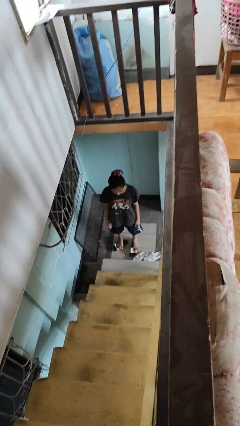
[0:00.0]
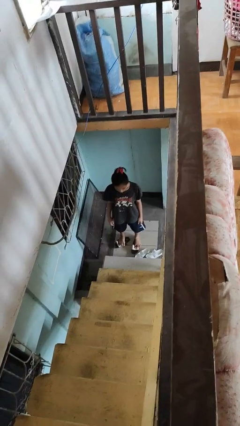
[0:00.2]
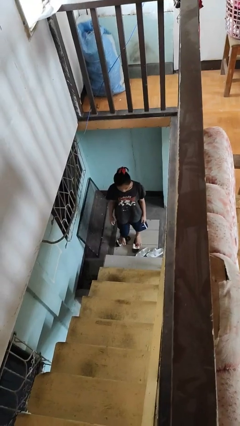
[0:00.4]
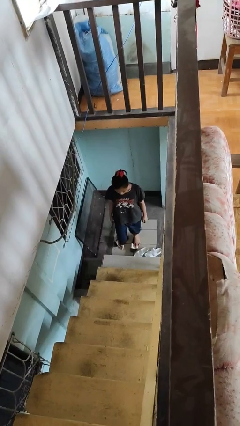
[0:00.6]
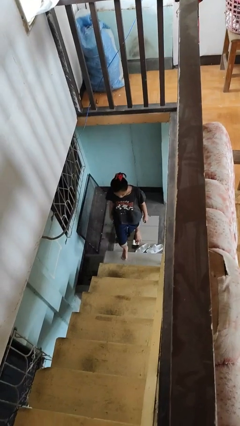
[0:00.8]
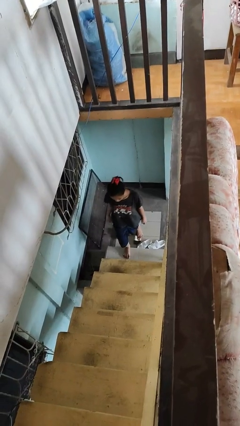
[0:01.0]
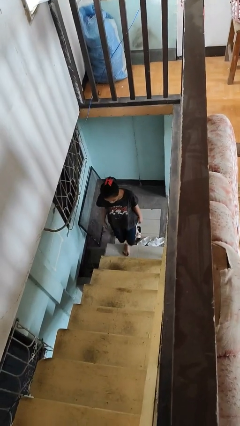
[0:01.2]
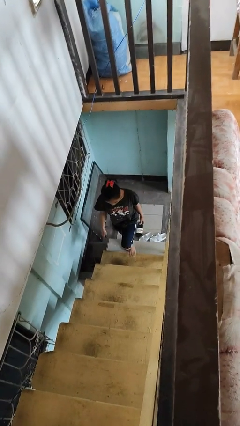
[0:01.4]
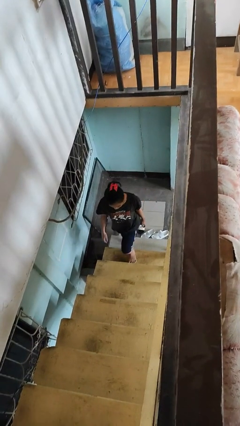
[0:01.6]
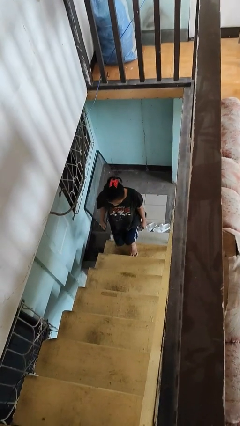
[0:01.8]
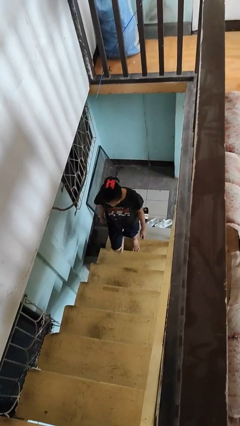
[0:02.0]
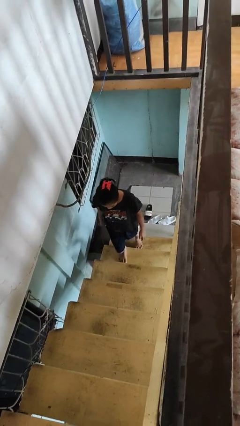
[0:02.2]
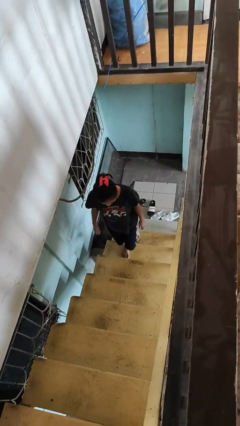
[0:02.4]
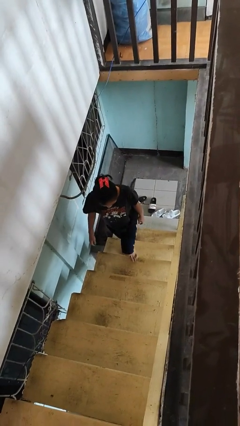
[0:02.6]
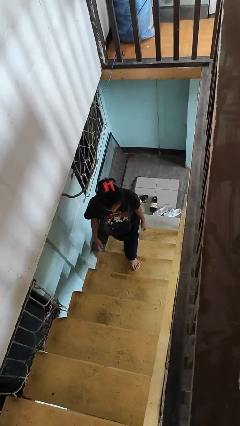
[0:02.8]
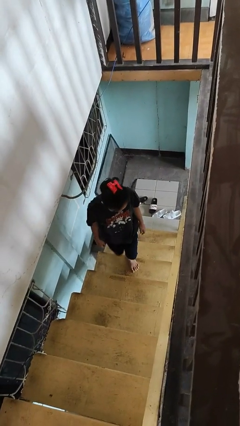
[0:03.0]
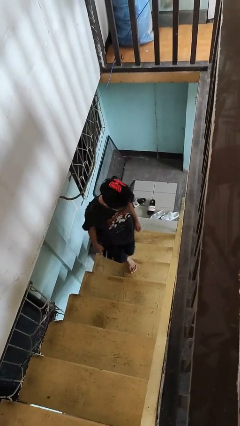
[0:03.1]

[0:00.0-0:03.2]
person climbs up stairs

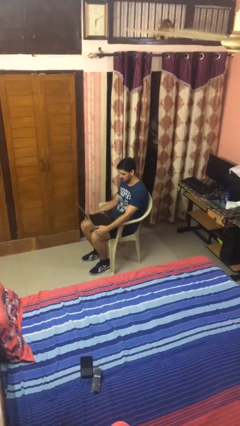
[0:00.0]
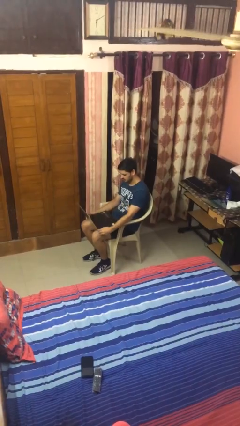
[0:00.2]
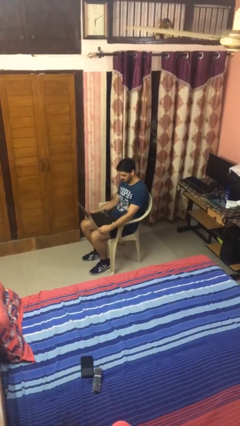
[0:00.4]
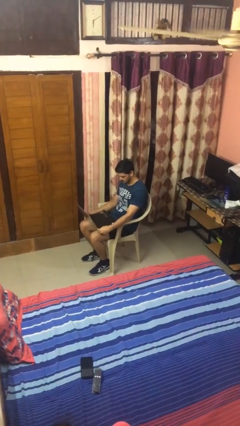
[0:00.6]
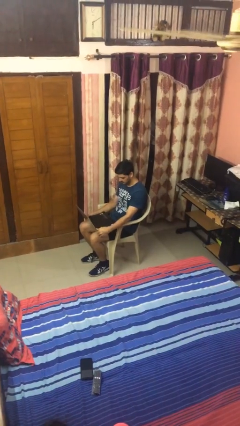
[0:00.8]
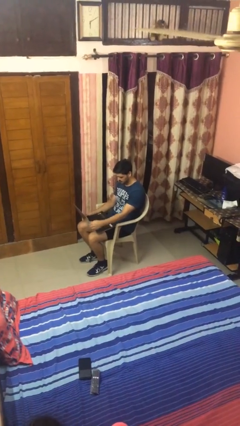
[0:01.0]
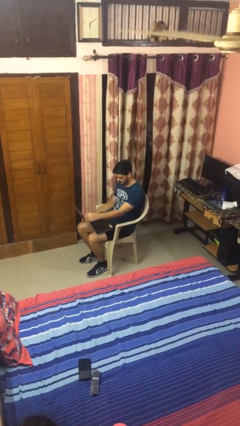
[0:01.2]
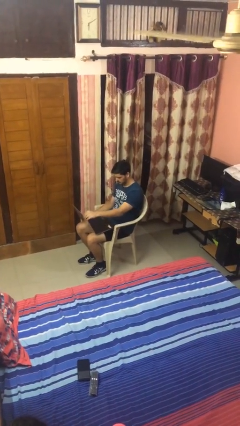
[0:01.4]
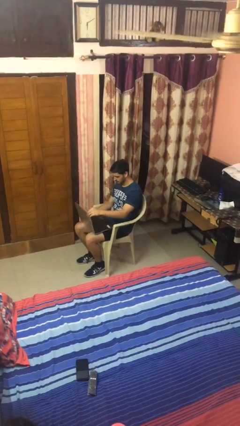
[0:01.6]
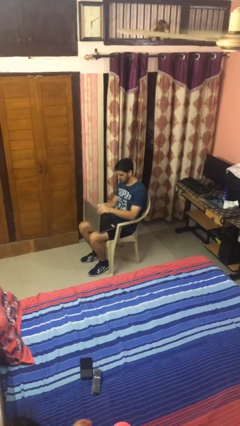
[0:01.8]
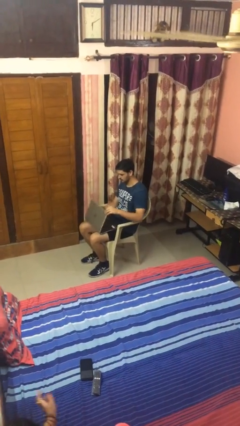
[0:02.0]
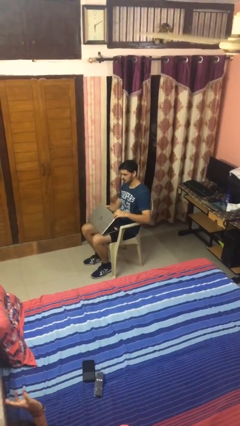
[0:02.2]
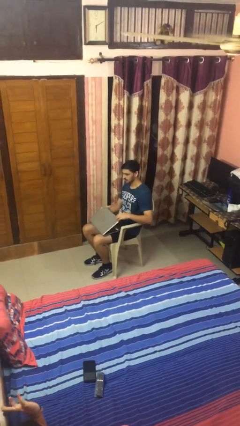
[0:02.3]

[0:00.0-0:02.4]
person closes laptop

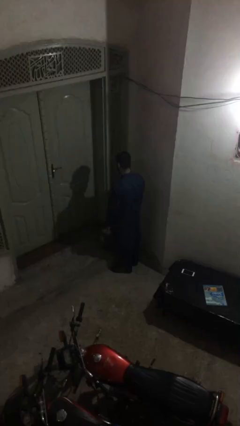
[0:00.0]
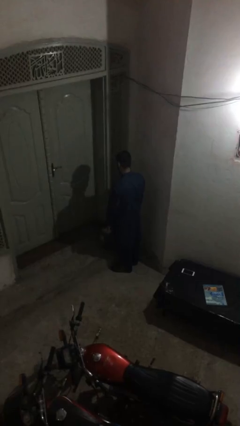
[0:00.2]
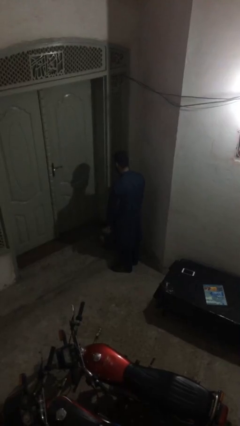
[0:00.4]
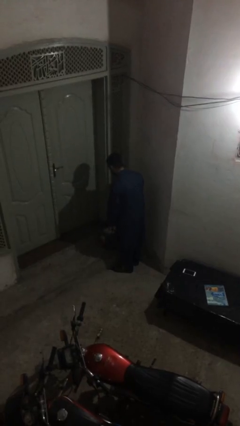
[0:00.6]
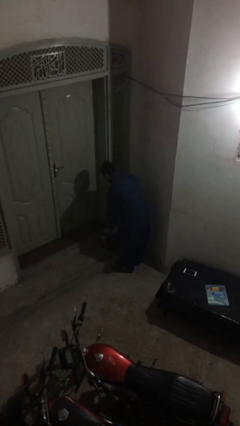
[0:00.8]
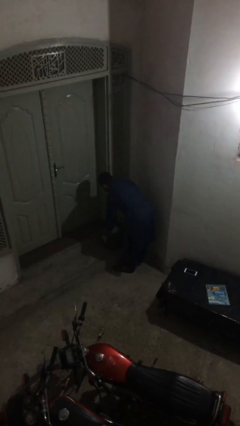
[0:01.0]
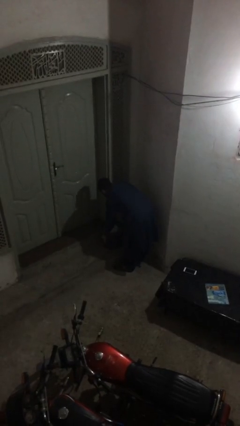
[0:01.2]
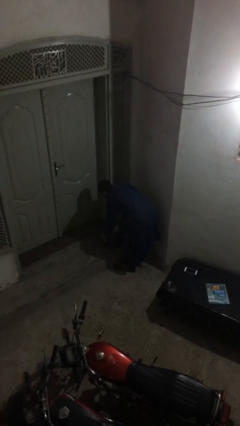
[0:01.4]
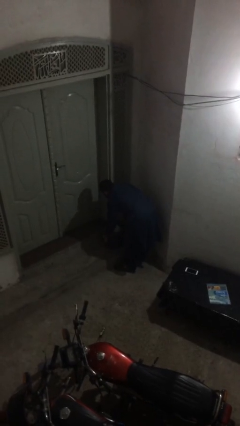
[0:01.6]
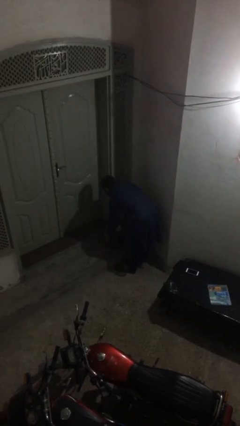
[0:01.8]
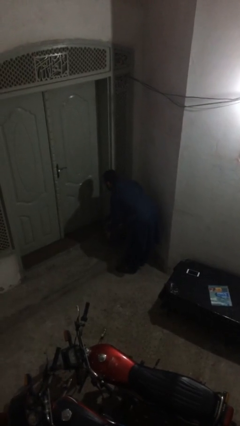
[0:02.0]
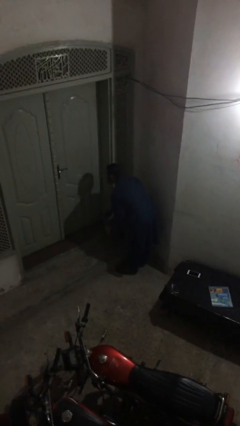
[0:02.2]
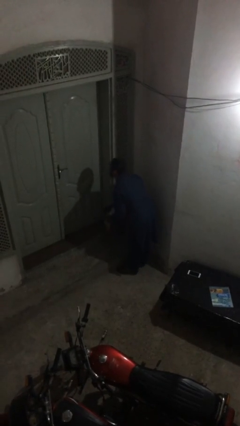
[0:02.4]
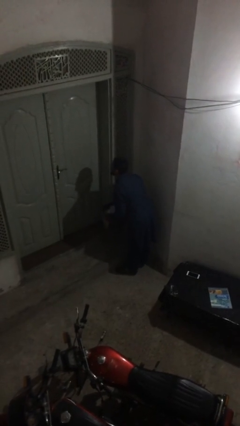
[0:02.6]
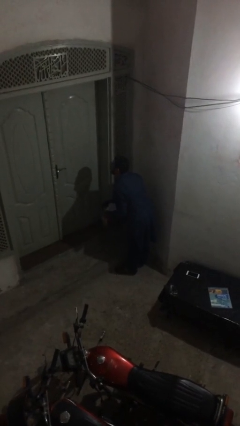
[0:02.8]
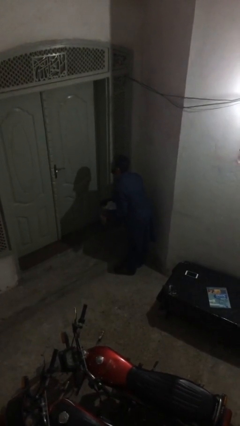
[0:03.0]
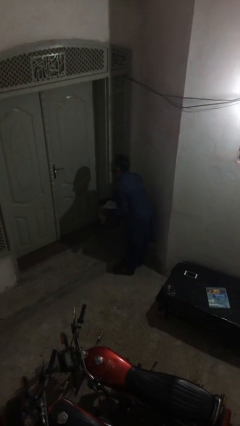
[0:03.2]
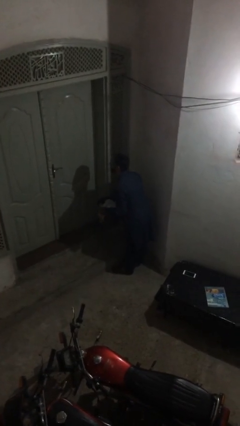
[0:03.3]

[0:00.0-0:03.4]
person picks up object from table

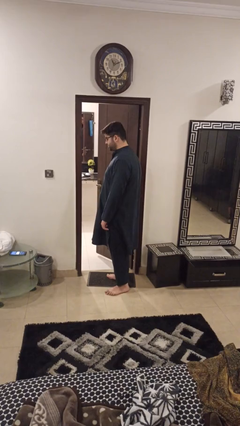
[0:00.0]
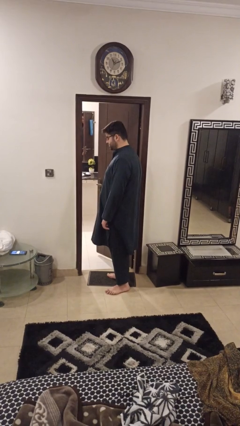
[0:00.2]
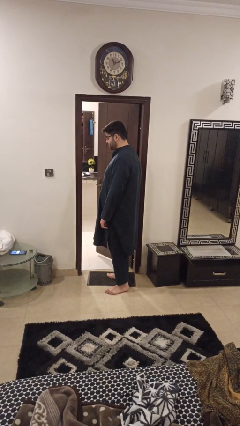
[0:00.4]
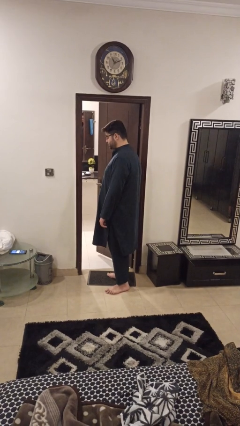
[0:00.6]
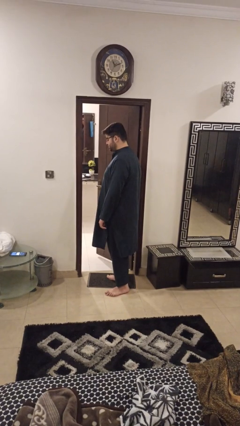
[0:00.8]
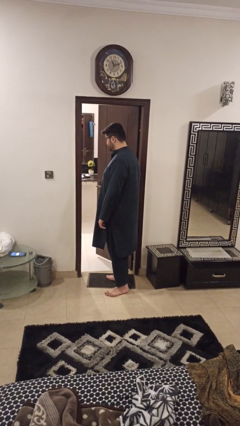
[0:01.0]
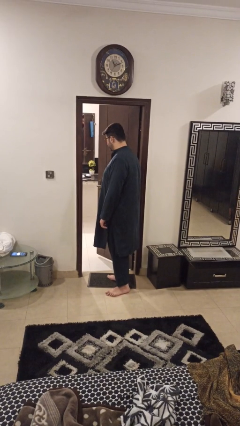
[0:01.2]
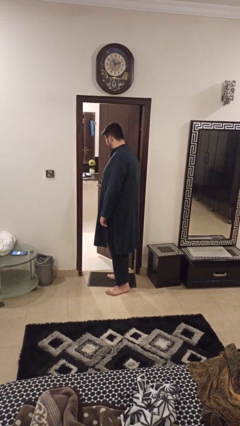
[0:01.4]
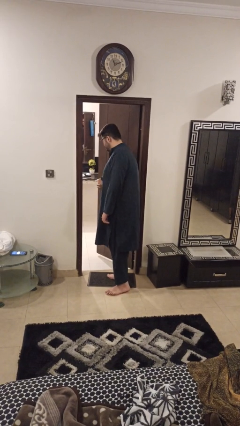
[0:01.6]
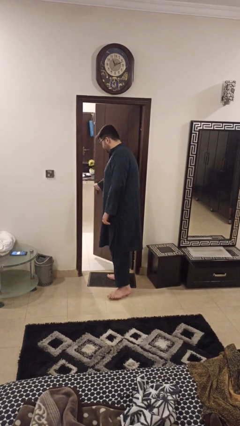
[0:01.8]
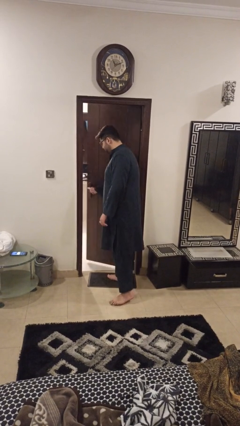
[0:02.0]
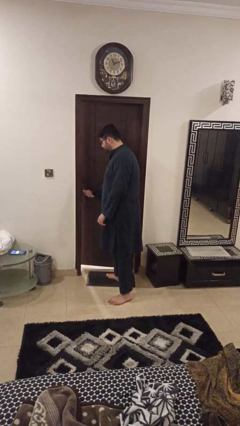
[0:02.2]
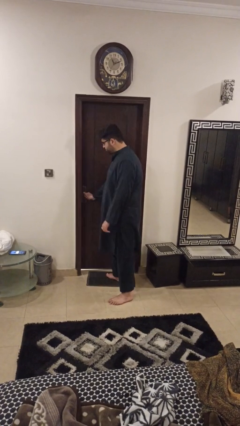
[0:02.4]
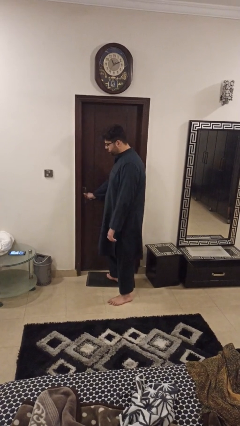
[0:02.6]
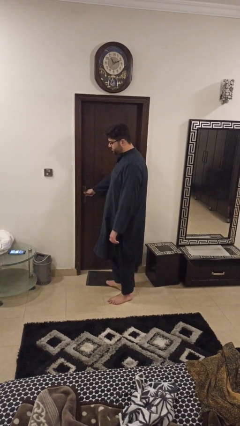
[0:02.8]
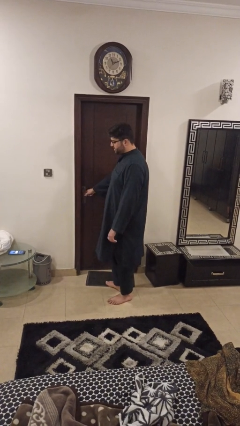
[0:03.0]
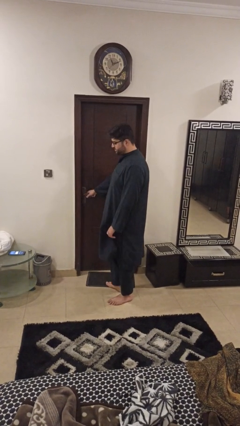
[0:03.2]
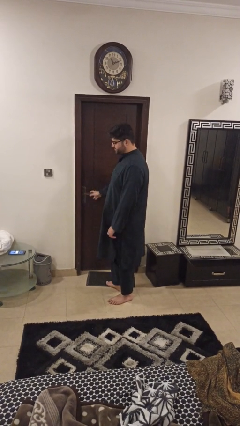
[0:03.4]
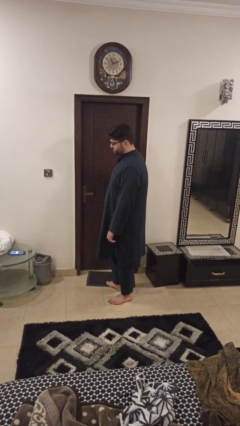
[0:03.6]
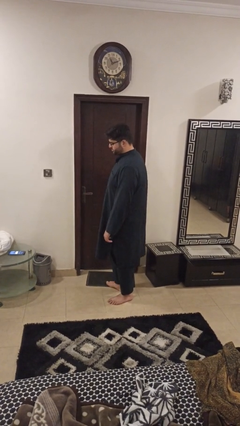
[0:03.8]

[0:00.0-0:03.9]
person closes facility door

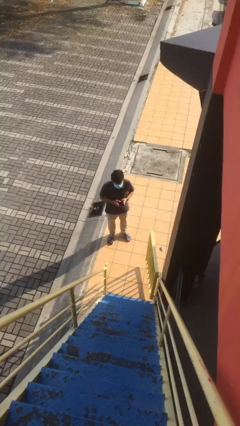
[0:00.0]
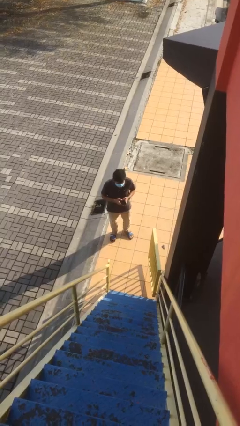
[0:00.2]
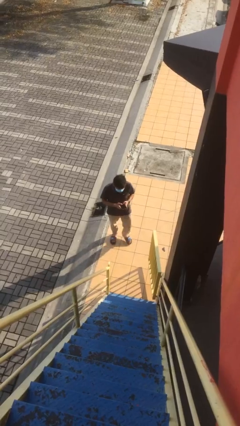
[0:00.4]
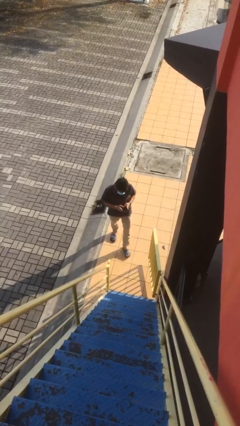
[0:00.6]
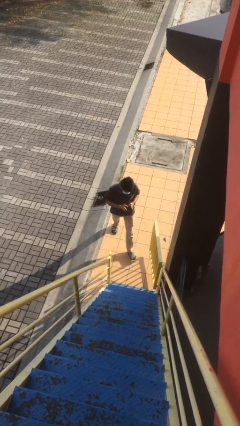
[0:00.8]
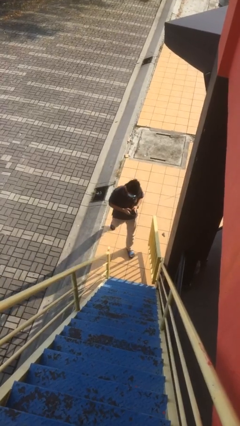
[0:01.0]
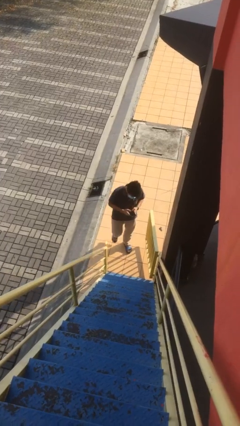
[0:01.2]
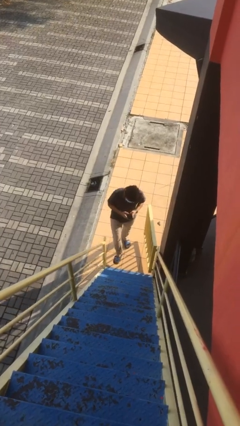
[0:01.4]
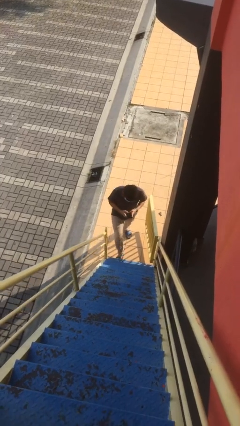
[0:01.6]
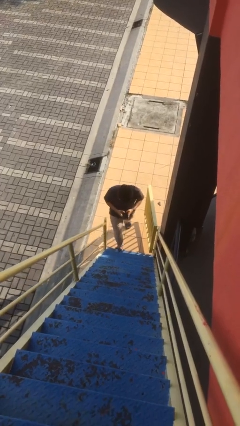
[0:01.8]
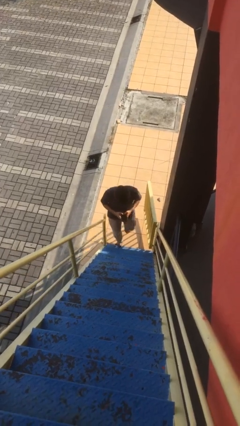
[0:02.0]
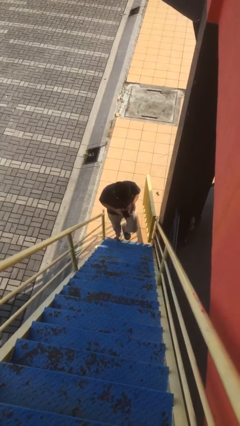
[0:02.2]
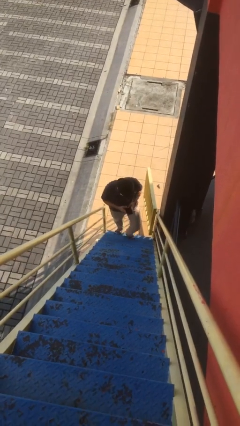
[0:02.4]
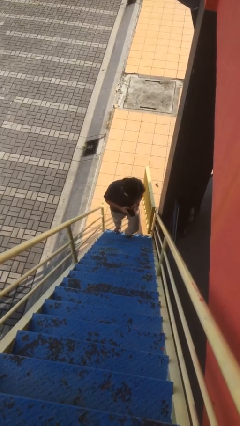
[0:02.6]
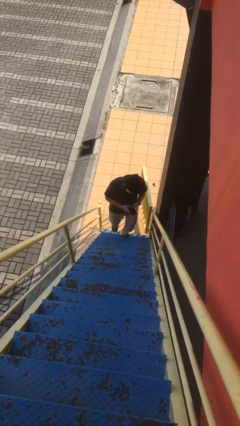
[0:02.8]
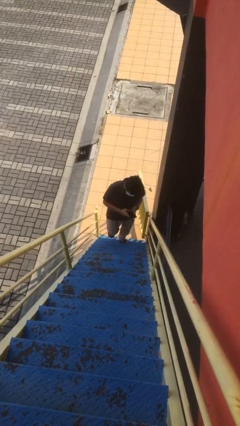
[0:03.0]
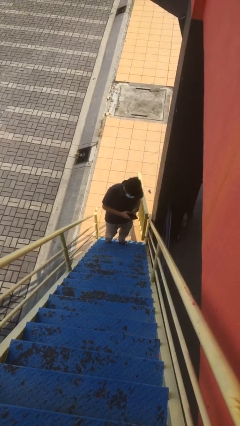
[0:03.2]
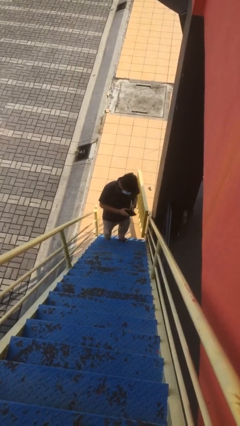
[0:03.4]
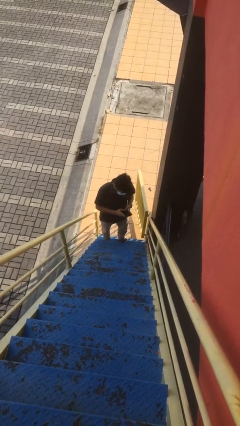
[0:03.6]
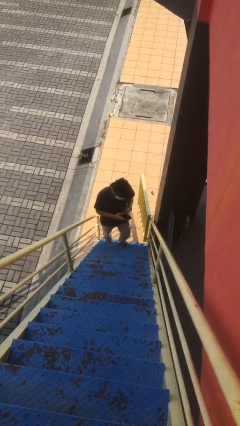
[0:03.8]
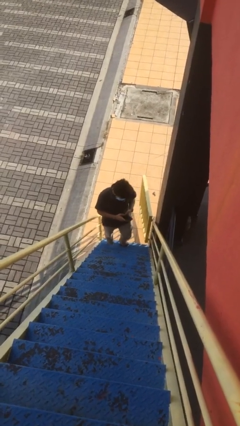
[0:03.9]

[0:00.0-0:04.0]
person enters scene through structure

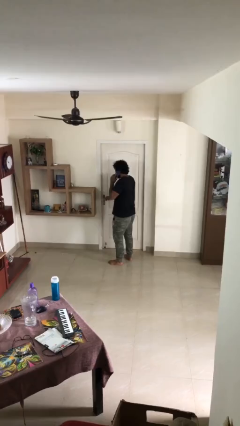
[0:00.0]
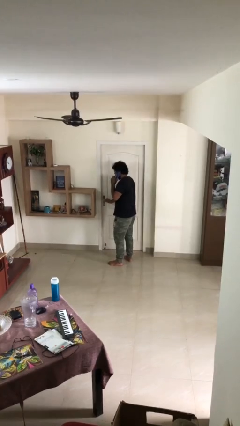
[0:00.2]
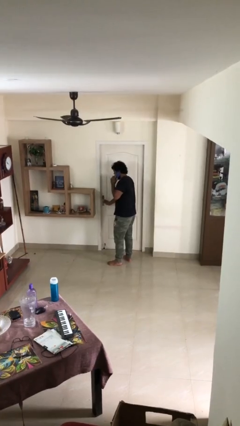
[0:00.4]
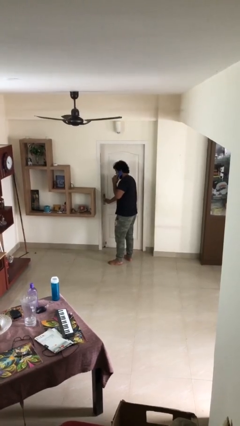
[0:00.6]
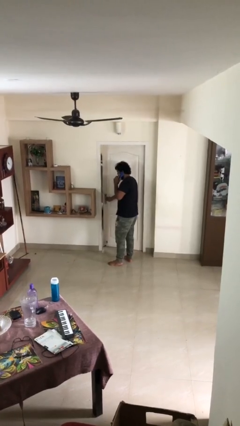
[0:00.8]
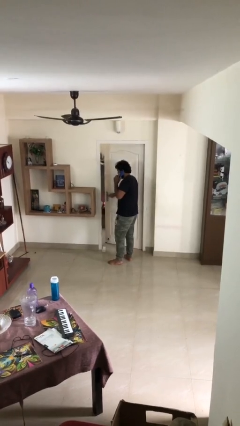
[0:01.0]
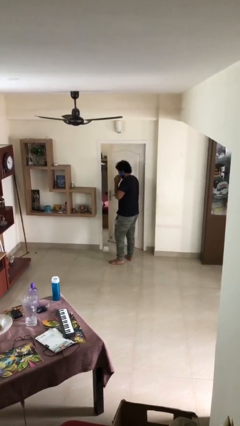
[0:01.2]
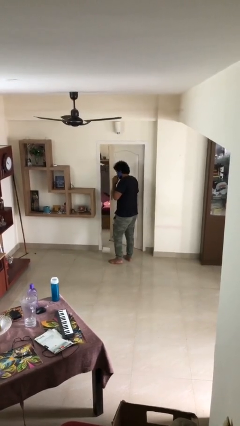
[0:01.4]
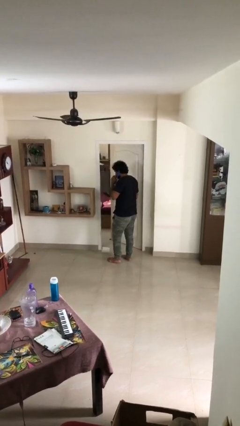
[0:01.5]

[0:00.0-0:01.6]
person opens facility door
